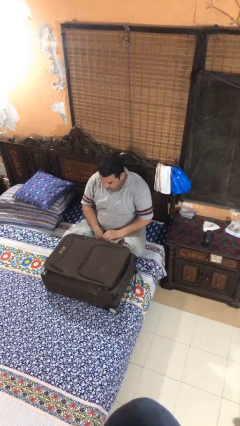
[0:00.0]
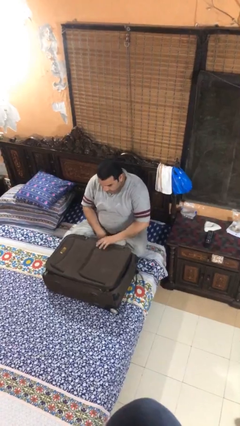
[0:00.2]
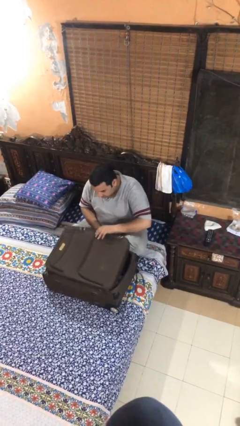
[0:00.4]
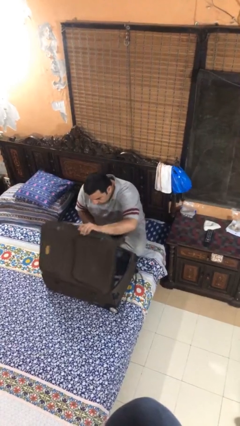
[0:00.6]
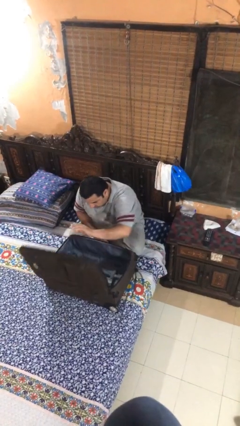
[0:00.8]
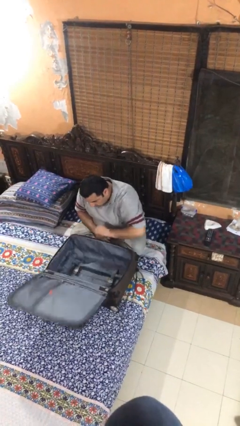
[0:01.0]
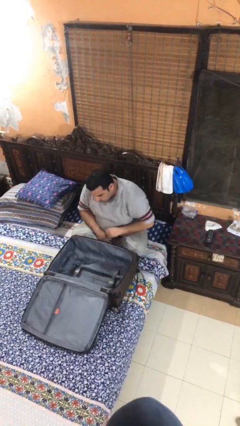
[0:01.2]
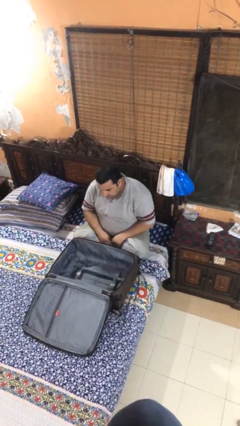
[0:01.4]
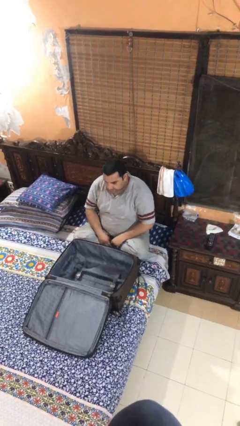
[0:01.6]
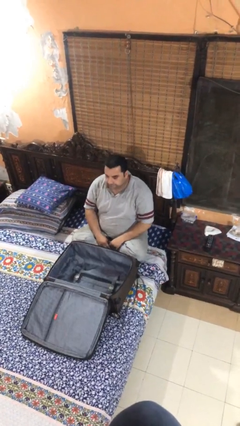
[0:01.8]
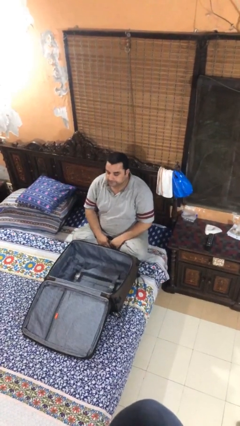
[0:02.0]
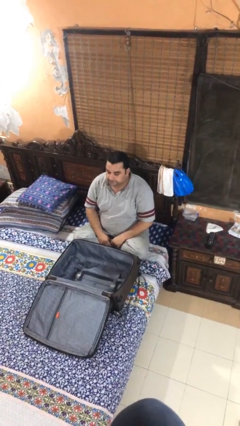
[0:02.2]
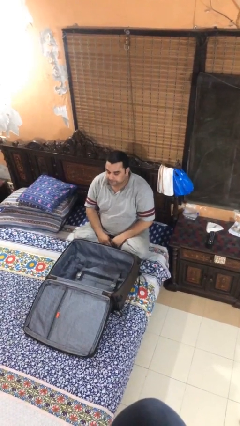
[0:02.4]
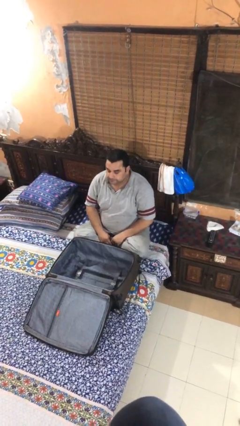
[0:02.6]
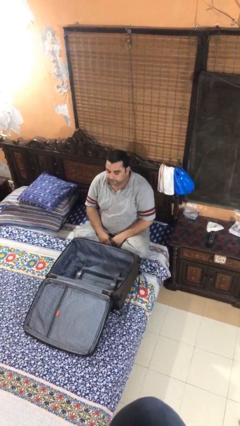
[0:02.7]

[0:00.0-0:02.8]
person opens suitcase

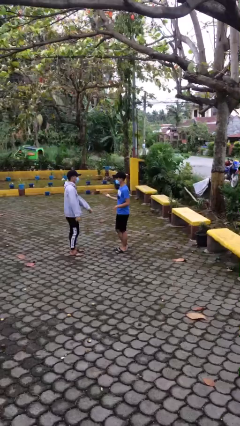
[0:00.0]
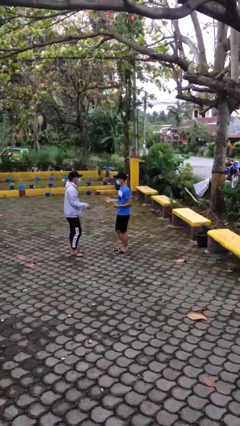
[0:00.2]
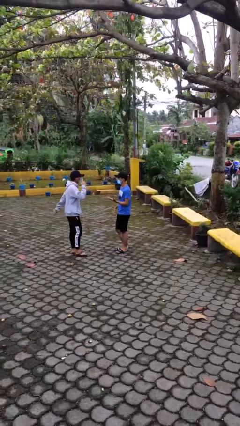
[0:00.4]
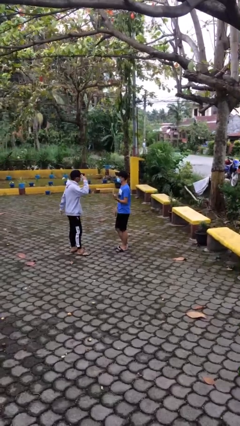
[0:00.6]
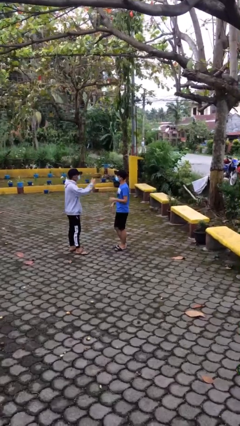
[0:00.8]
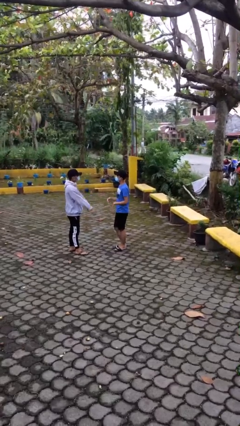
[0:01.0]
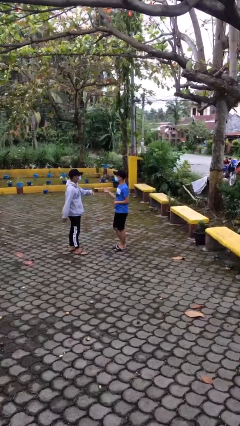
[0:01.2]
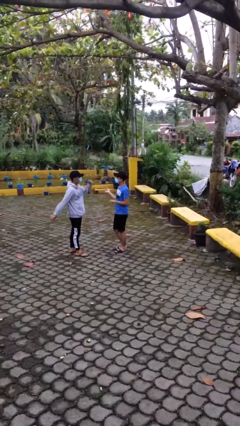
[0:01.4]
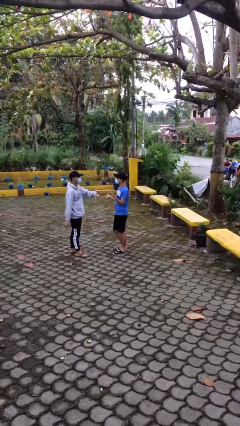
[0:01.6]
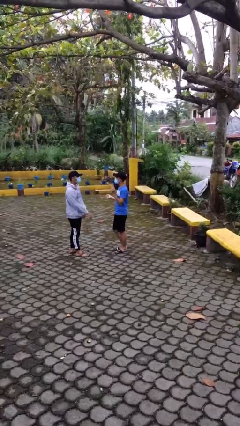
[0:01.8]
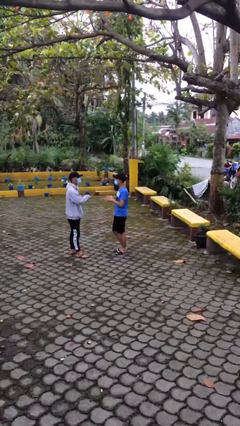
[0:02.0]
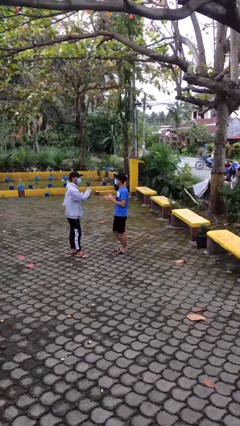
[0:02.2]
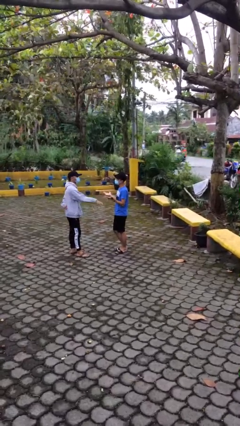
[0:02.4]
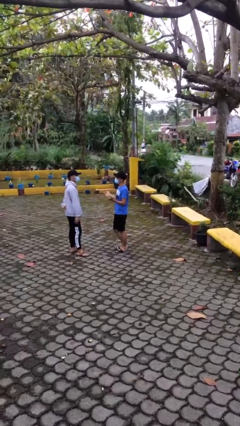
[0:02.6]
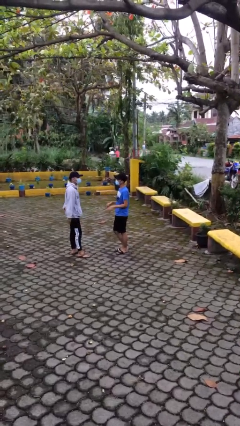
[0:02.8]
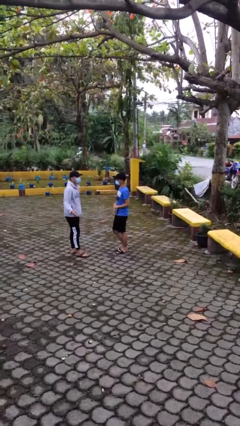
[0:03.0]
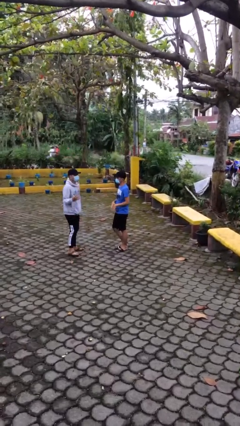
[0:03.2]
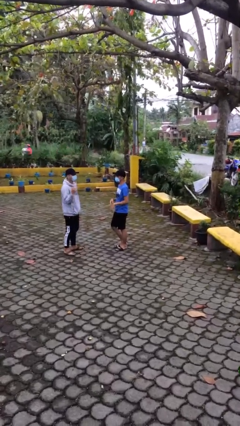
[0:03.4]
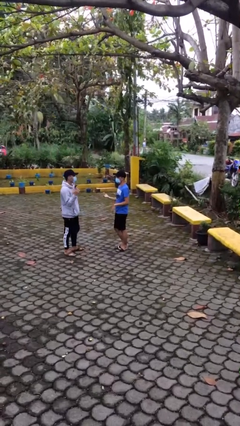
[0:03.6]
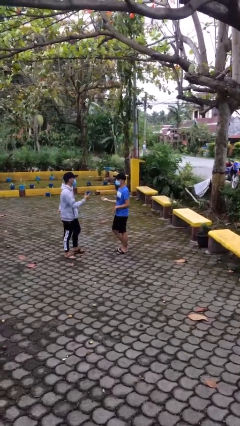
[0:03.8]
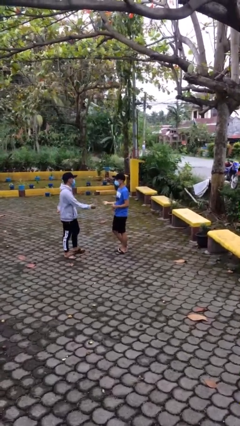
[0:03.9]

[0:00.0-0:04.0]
person talks to person

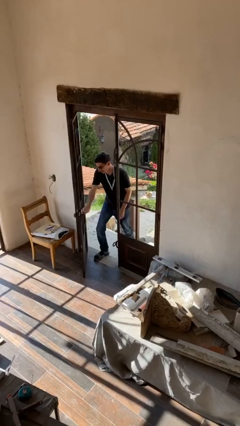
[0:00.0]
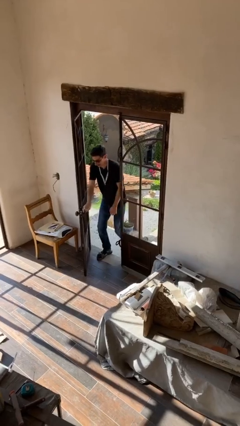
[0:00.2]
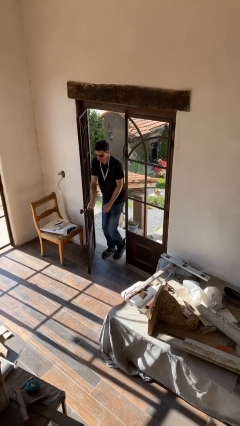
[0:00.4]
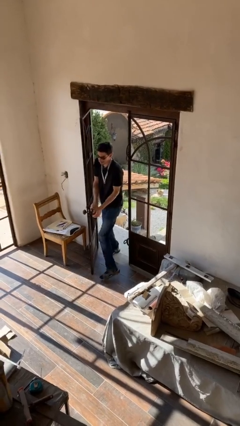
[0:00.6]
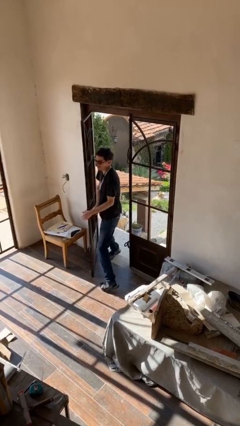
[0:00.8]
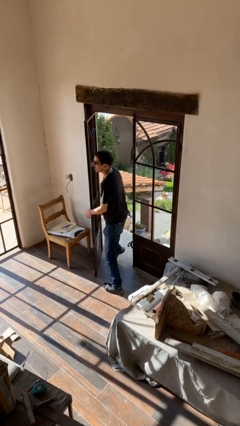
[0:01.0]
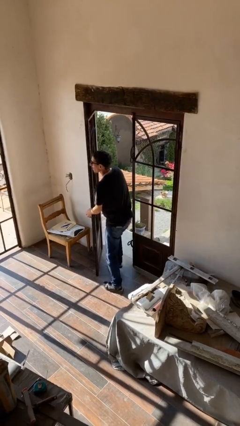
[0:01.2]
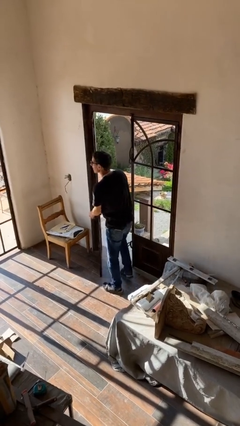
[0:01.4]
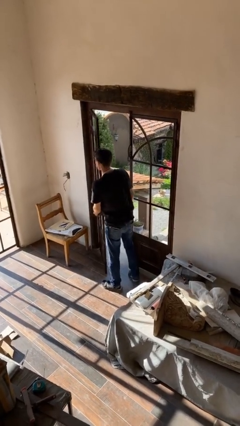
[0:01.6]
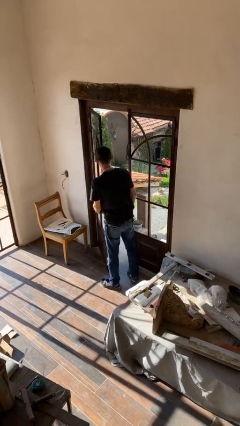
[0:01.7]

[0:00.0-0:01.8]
person enters scene through structure

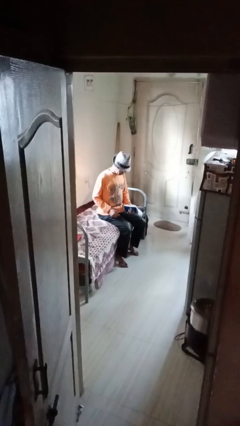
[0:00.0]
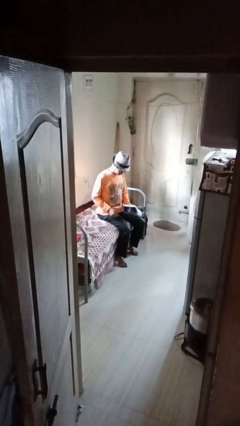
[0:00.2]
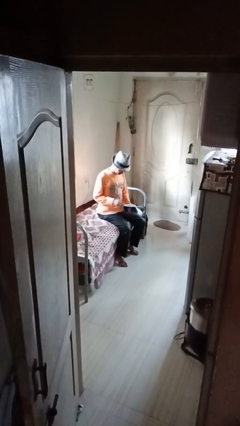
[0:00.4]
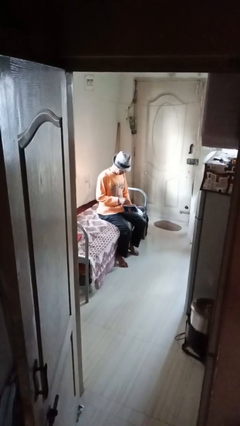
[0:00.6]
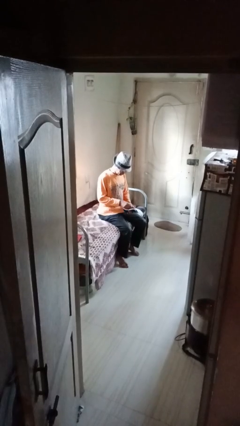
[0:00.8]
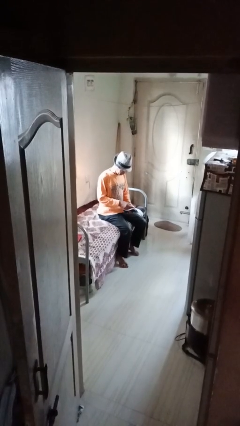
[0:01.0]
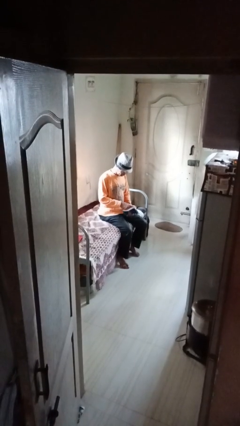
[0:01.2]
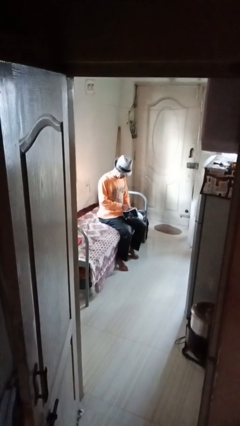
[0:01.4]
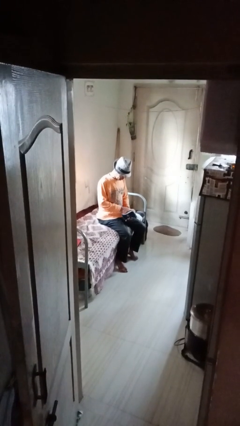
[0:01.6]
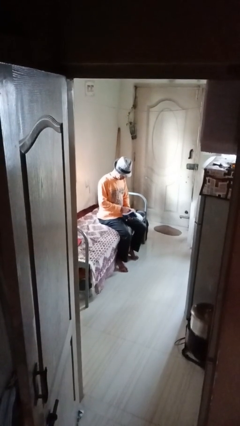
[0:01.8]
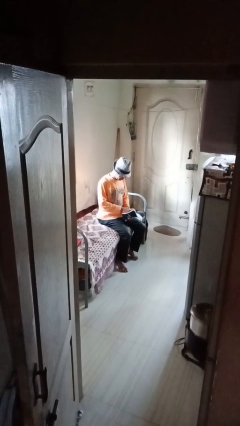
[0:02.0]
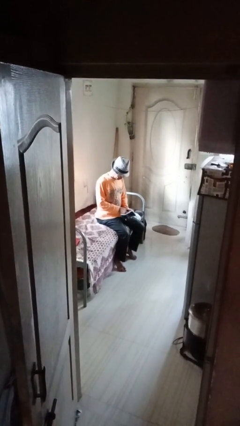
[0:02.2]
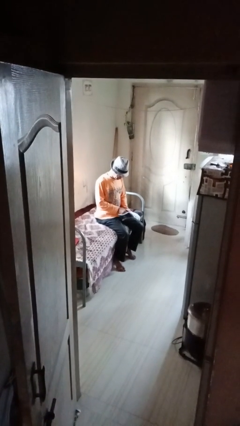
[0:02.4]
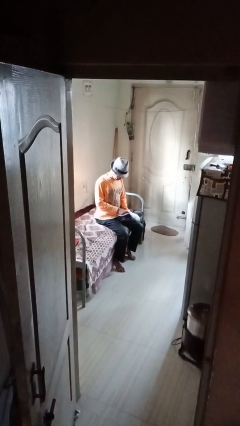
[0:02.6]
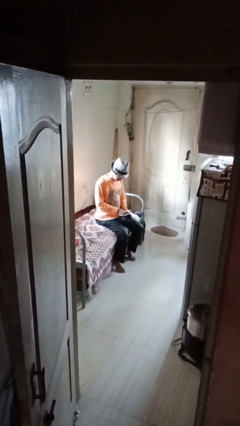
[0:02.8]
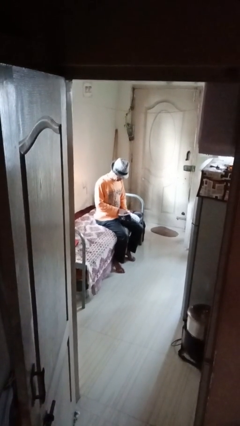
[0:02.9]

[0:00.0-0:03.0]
person searches in purse

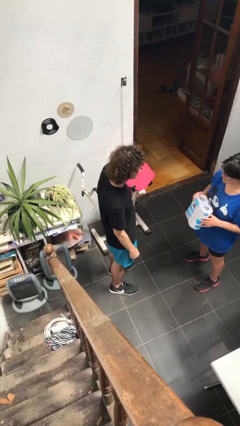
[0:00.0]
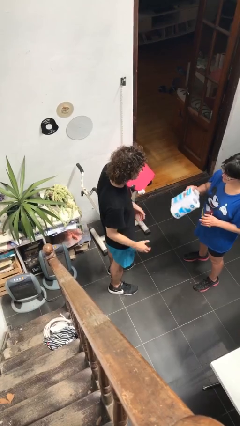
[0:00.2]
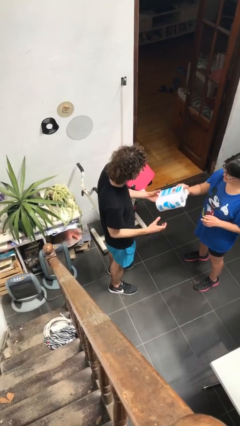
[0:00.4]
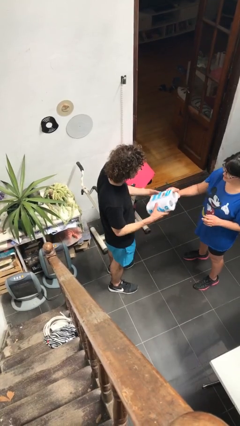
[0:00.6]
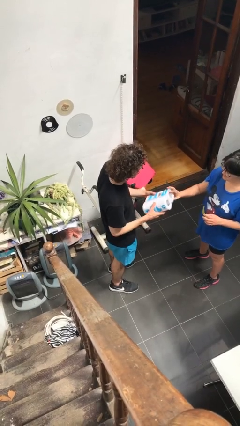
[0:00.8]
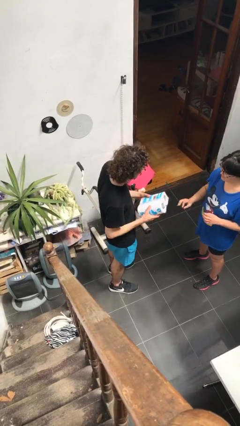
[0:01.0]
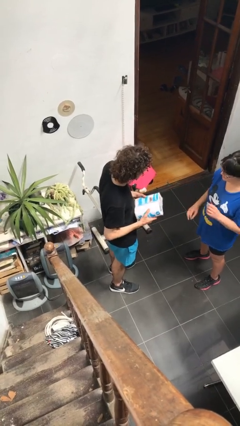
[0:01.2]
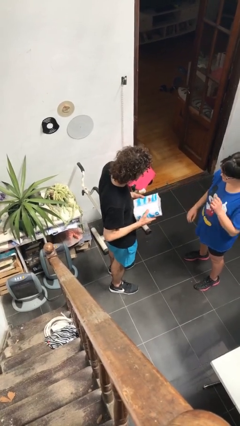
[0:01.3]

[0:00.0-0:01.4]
person transfers object to person

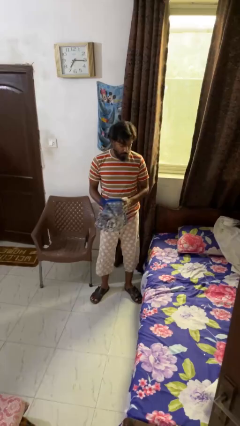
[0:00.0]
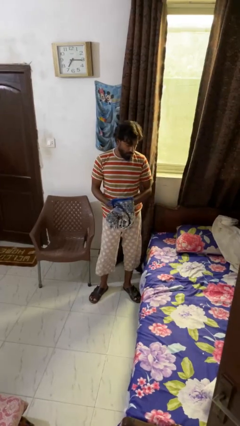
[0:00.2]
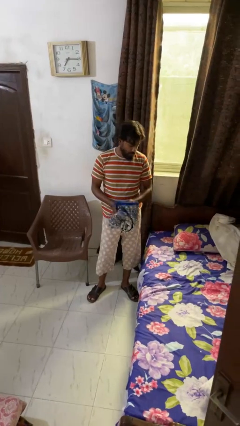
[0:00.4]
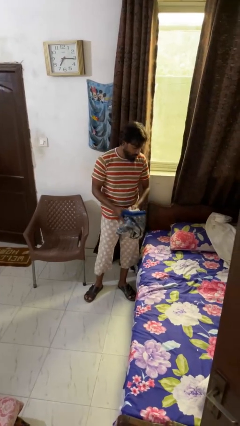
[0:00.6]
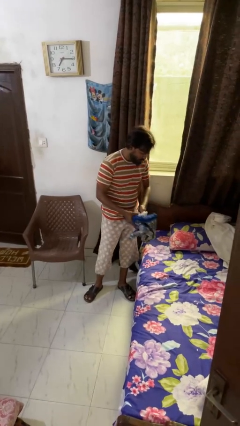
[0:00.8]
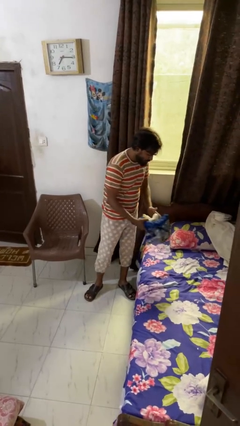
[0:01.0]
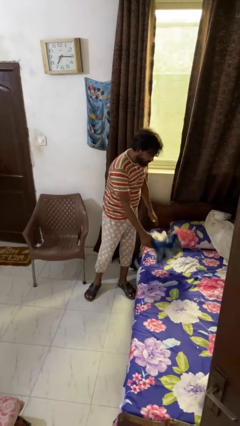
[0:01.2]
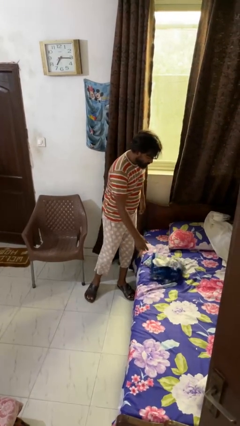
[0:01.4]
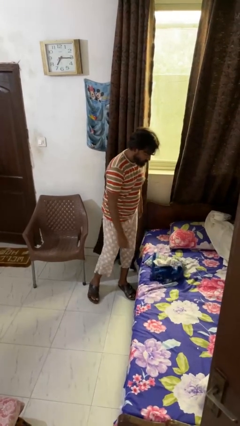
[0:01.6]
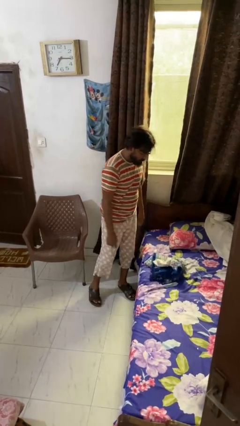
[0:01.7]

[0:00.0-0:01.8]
person puts down object on bed

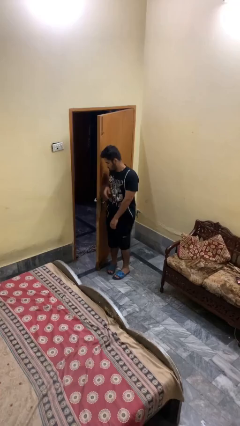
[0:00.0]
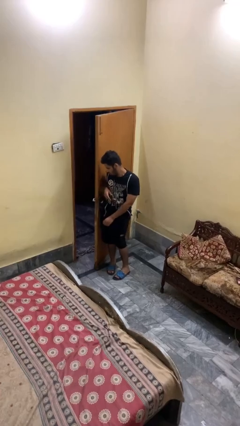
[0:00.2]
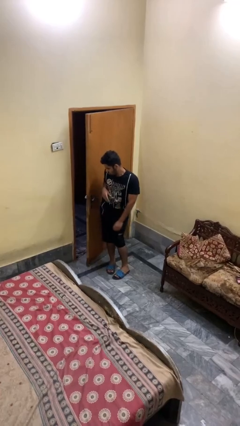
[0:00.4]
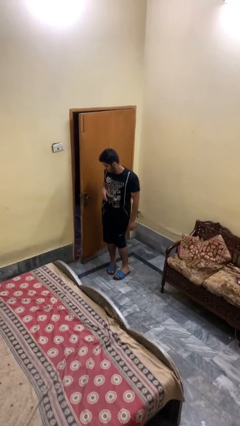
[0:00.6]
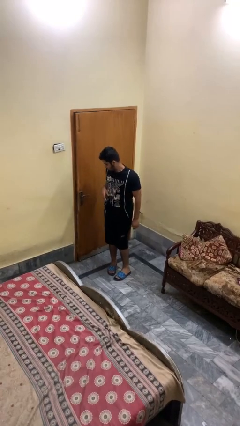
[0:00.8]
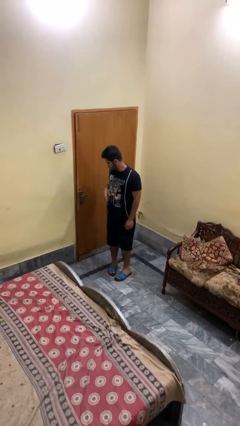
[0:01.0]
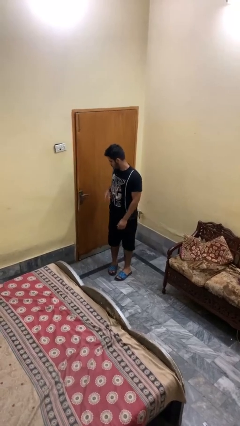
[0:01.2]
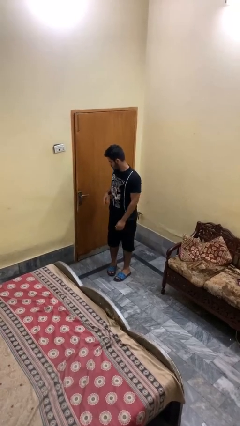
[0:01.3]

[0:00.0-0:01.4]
person closes door with hip

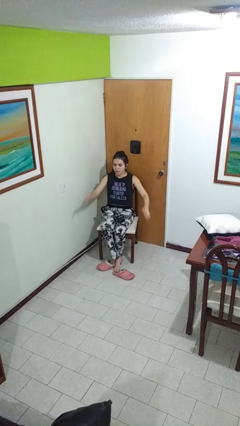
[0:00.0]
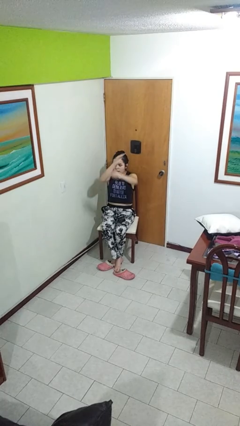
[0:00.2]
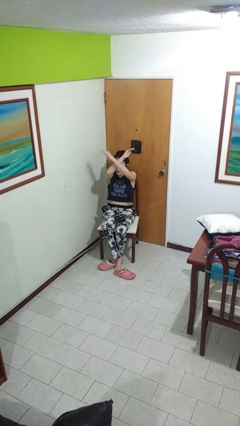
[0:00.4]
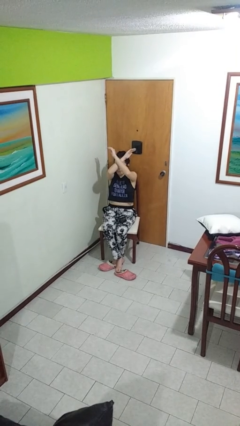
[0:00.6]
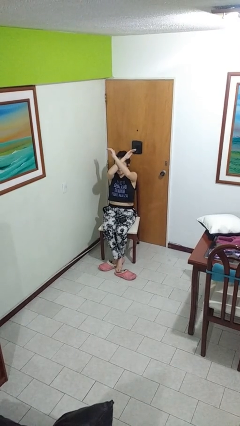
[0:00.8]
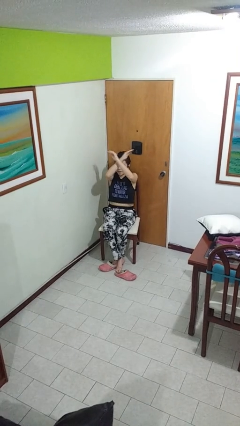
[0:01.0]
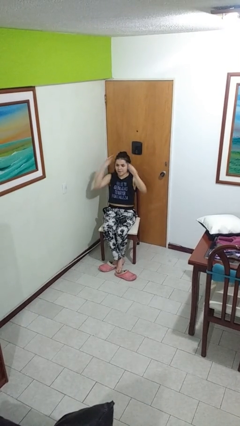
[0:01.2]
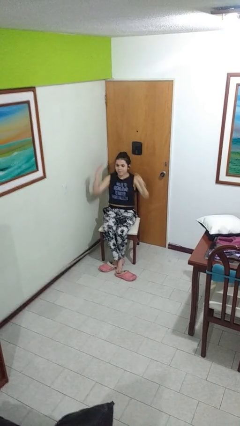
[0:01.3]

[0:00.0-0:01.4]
person gestures arms x
